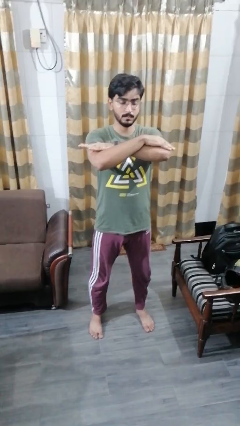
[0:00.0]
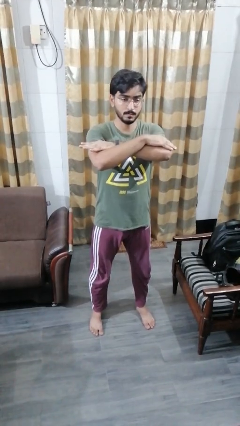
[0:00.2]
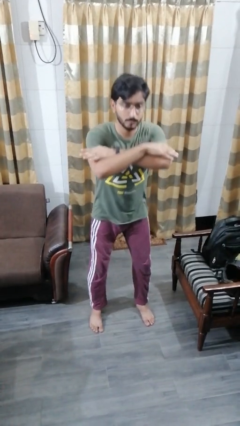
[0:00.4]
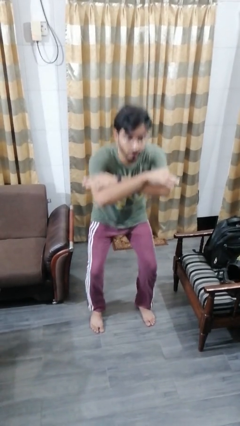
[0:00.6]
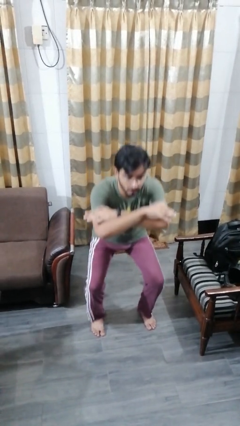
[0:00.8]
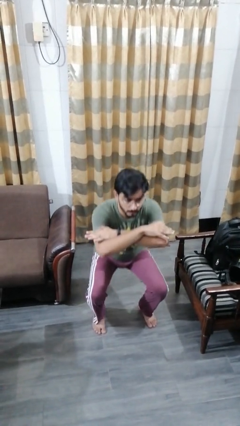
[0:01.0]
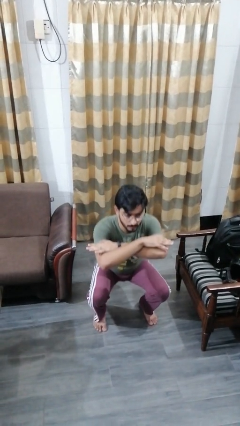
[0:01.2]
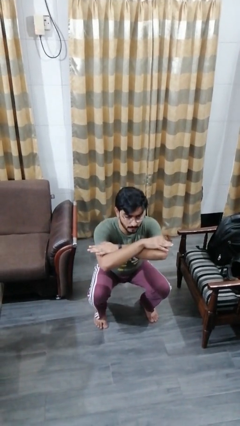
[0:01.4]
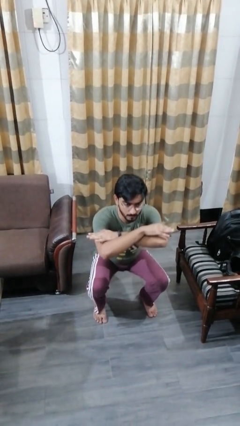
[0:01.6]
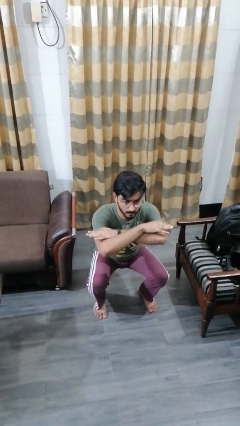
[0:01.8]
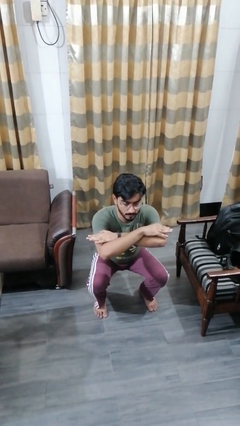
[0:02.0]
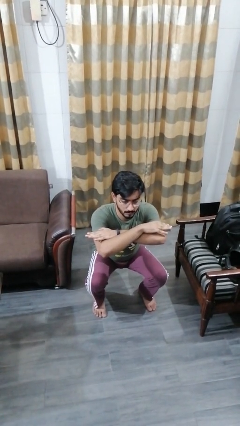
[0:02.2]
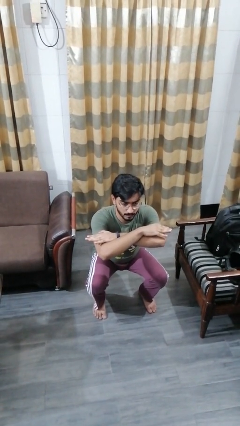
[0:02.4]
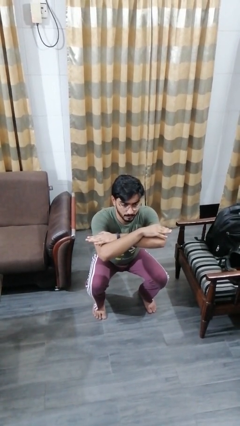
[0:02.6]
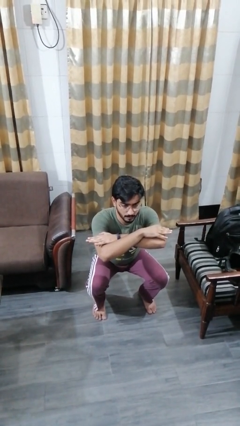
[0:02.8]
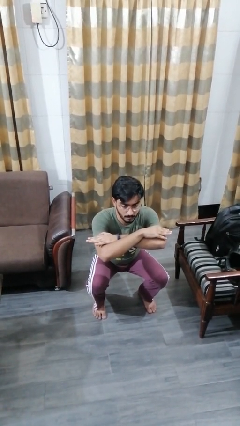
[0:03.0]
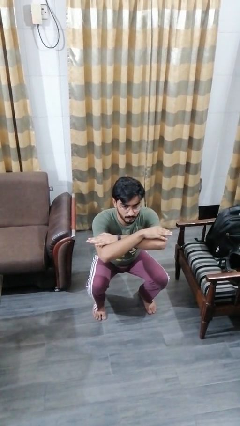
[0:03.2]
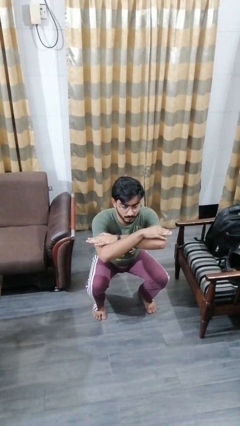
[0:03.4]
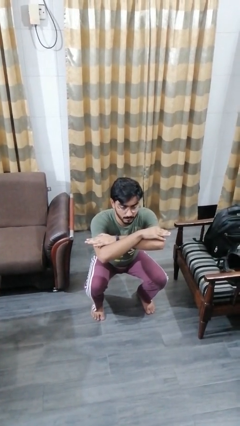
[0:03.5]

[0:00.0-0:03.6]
person sits crisscross

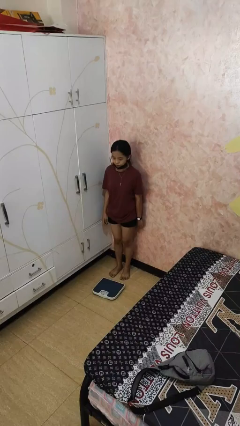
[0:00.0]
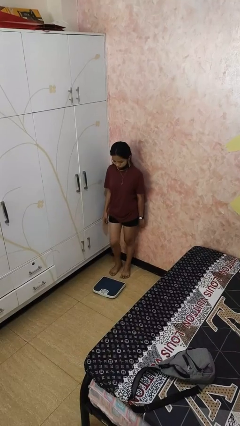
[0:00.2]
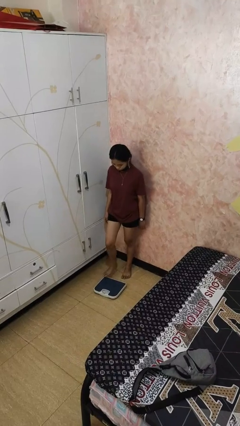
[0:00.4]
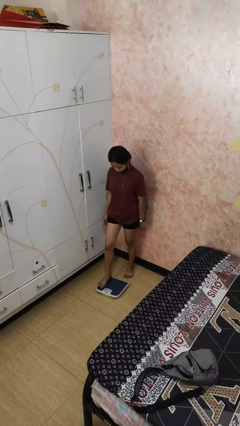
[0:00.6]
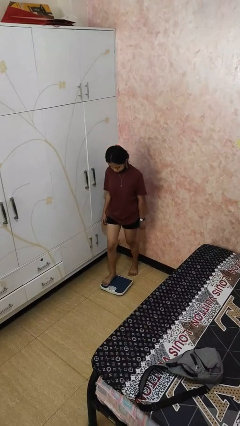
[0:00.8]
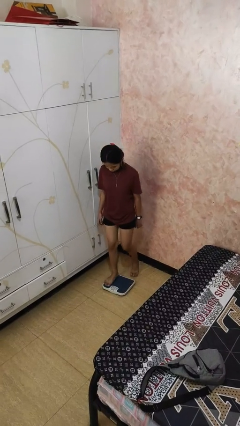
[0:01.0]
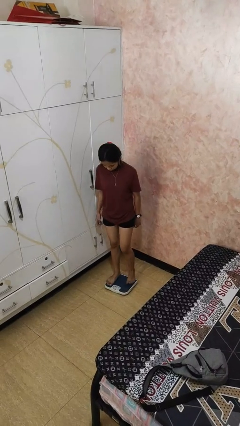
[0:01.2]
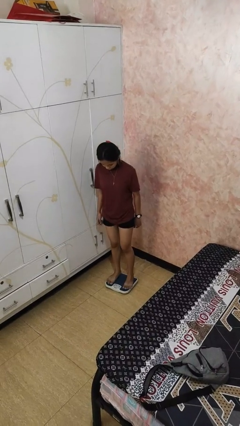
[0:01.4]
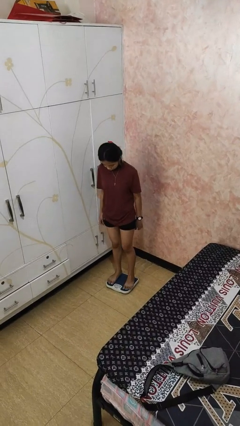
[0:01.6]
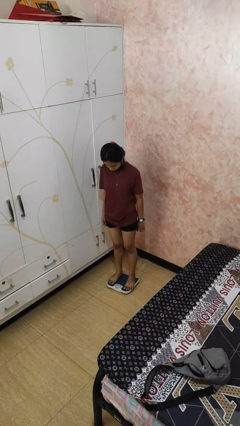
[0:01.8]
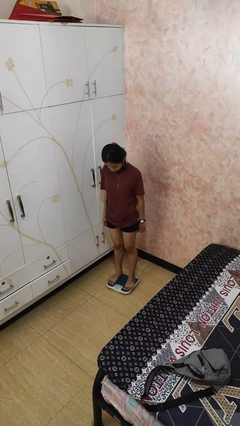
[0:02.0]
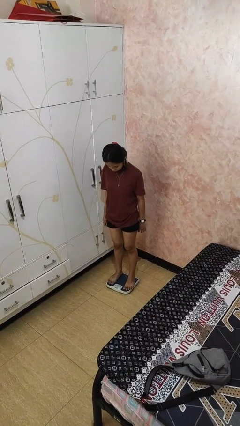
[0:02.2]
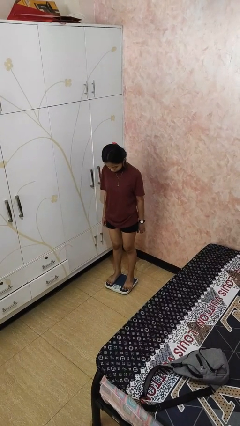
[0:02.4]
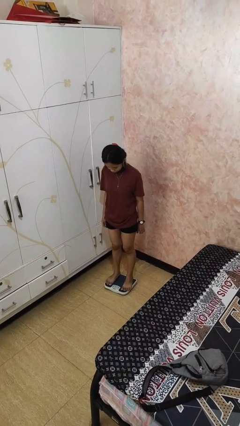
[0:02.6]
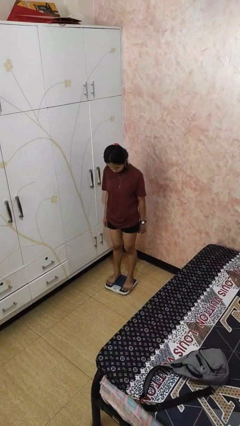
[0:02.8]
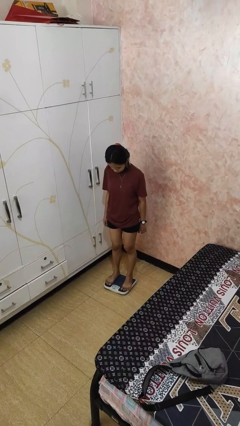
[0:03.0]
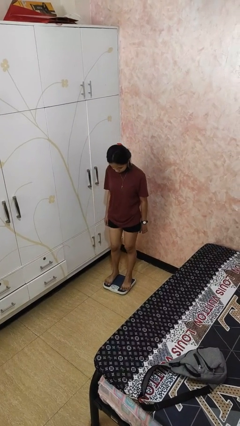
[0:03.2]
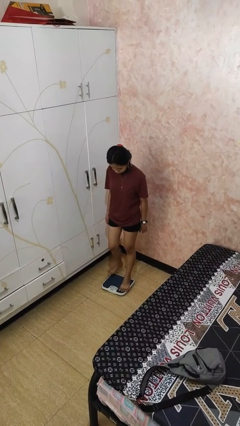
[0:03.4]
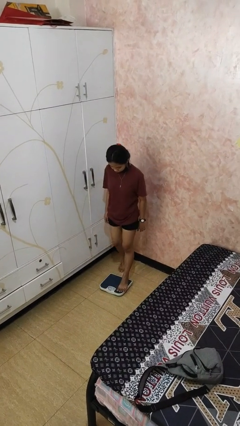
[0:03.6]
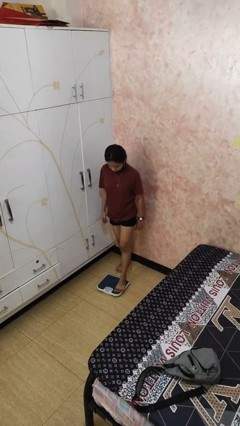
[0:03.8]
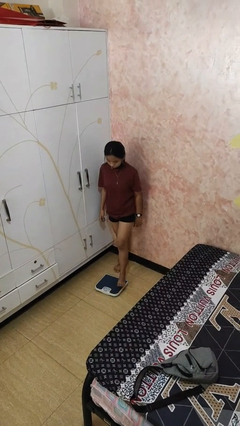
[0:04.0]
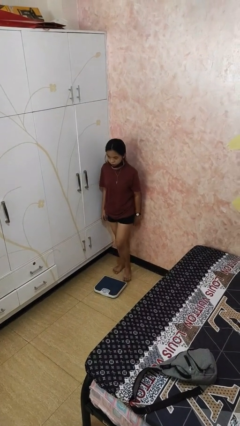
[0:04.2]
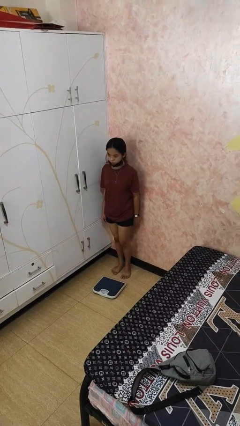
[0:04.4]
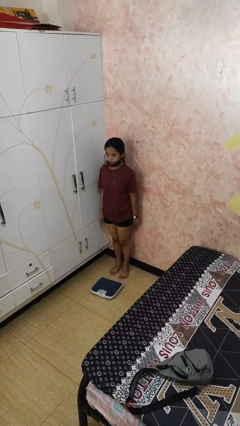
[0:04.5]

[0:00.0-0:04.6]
person uses bodyweight scale

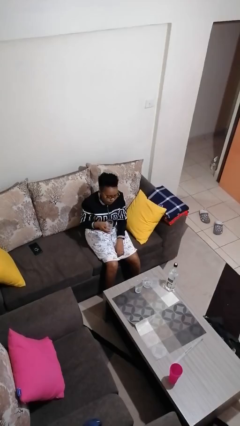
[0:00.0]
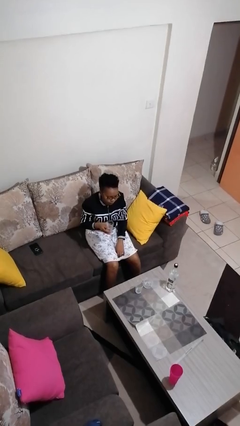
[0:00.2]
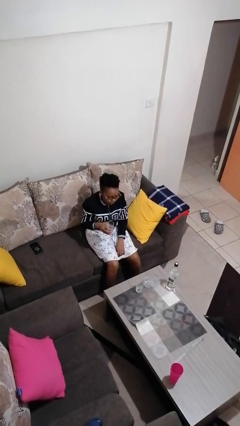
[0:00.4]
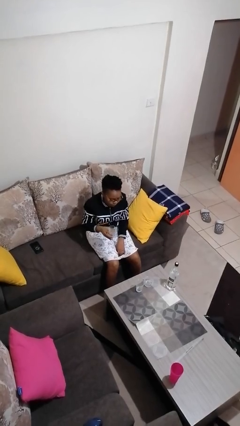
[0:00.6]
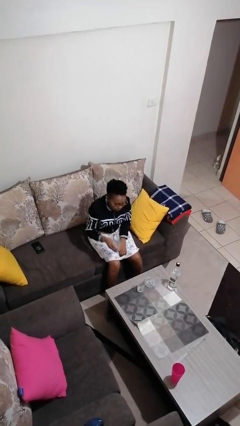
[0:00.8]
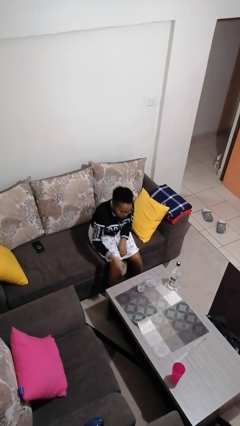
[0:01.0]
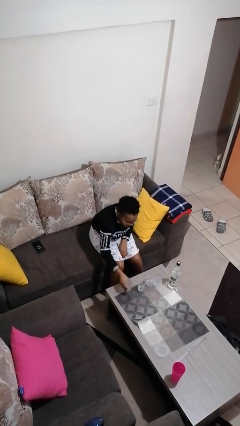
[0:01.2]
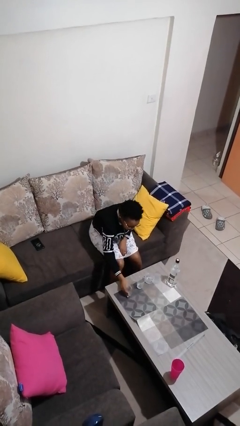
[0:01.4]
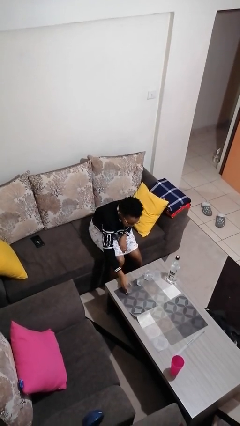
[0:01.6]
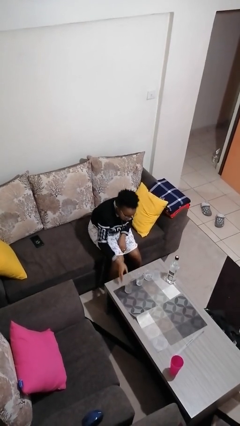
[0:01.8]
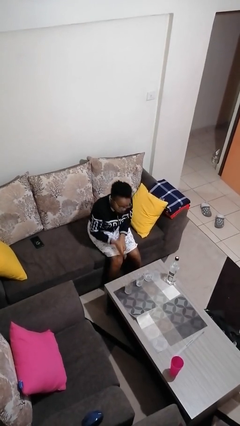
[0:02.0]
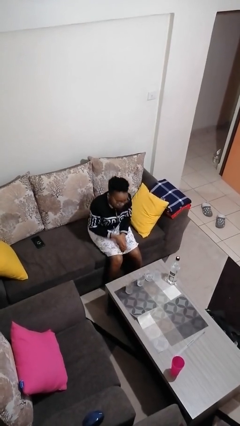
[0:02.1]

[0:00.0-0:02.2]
person puts down object on table

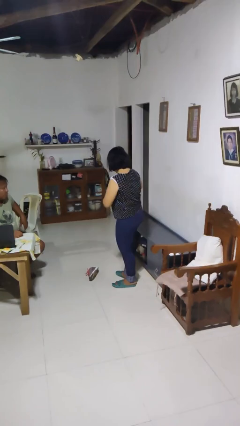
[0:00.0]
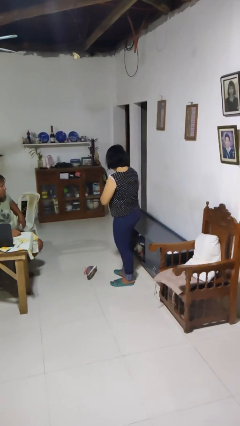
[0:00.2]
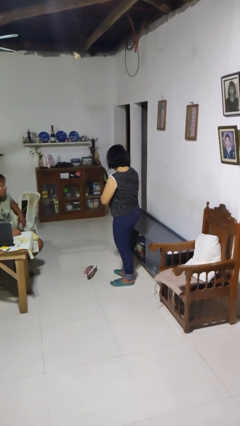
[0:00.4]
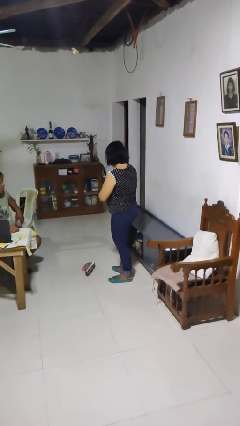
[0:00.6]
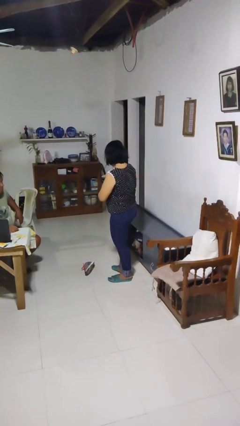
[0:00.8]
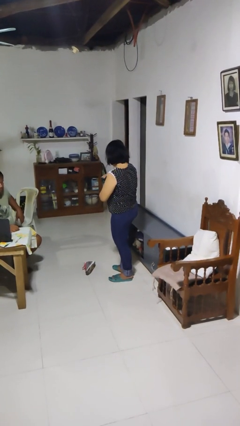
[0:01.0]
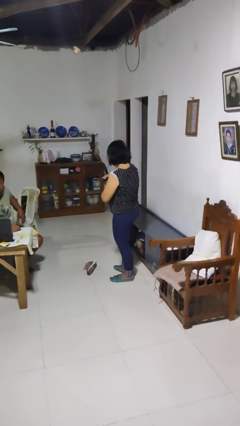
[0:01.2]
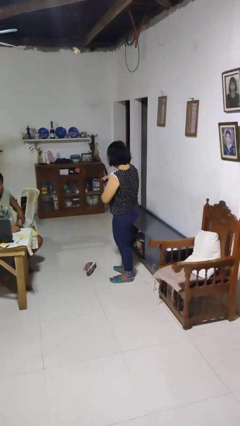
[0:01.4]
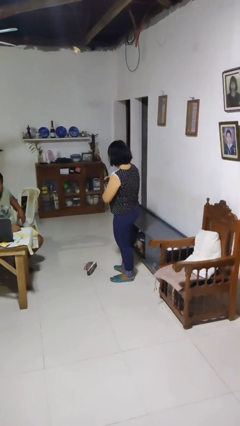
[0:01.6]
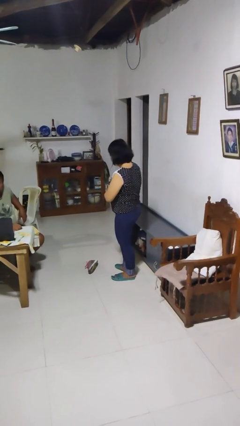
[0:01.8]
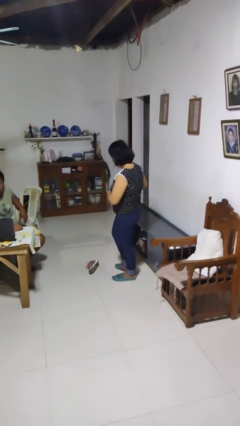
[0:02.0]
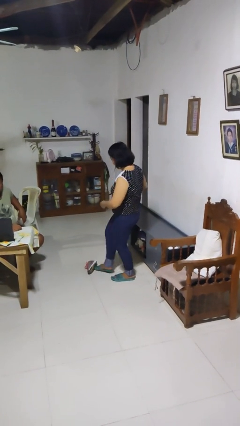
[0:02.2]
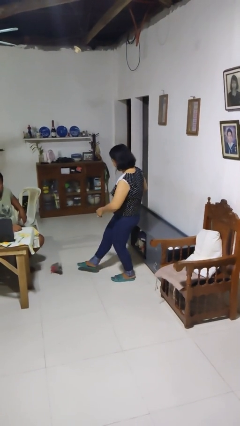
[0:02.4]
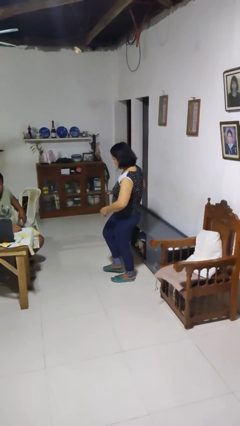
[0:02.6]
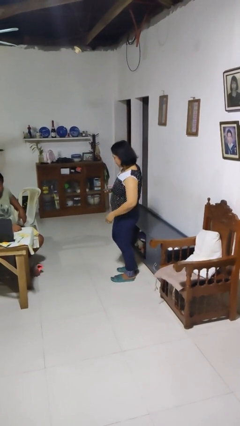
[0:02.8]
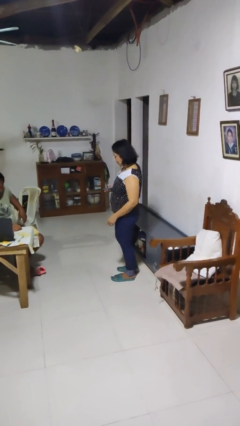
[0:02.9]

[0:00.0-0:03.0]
person kicks object to person

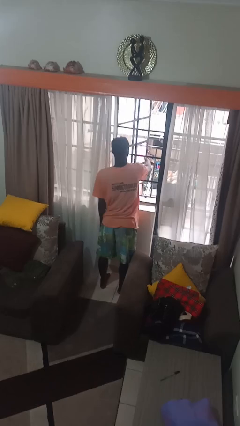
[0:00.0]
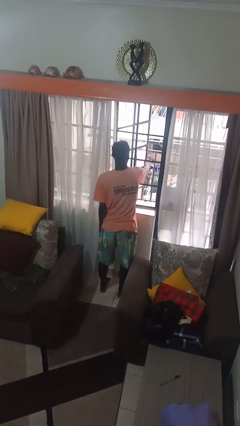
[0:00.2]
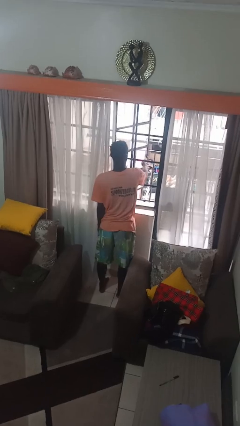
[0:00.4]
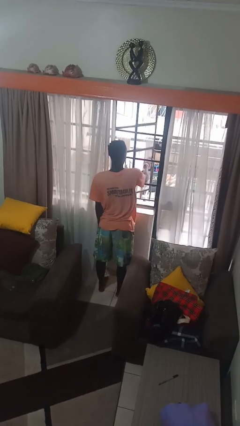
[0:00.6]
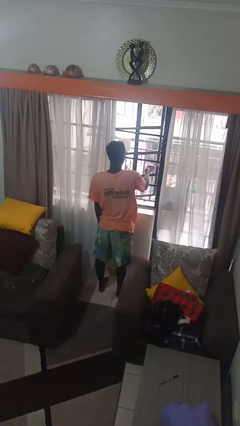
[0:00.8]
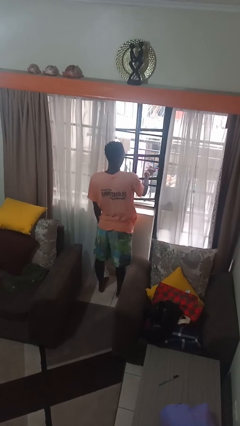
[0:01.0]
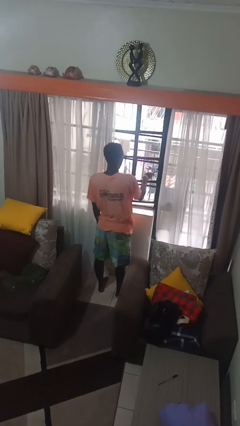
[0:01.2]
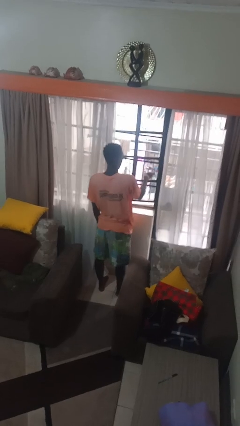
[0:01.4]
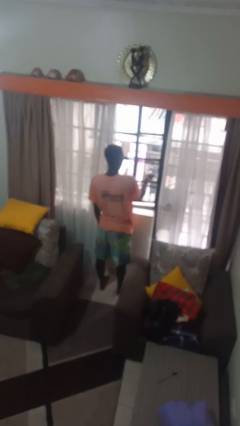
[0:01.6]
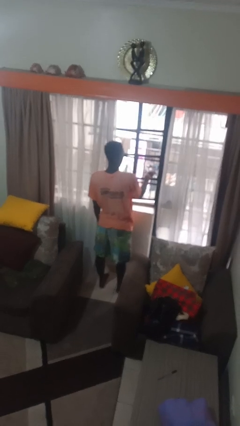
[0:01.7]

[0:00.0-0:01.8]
person closes home window

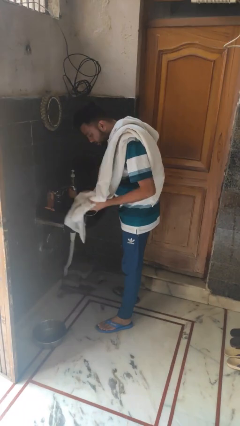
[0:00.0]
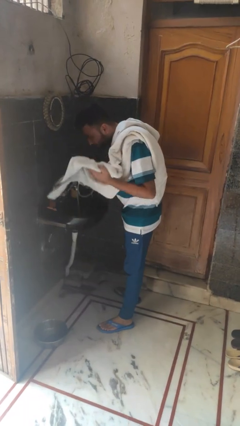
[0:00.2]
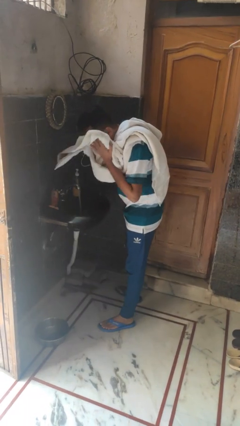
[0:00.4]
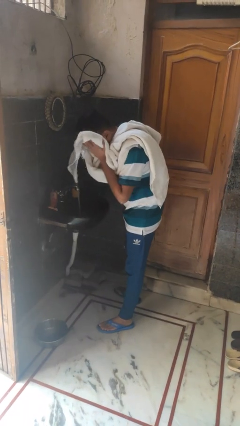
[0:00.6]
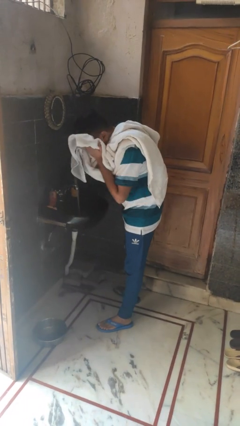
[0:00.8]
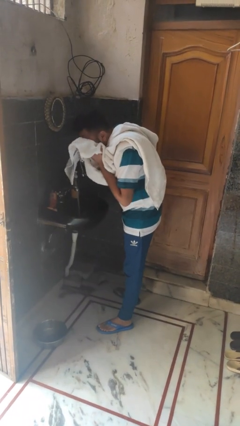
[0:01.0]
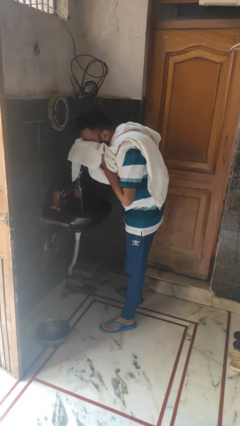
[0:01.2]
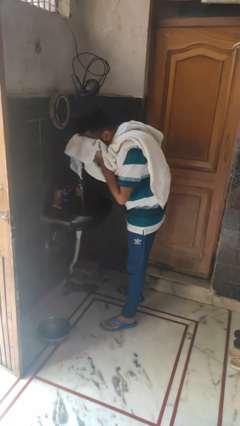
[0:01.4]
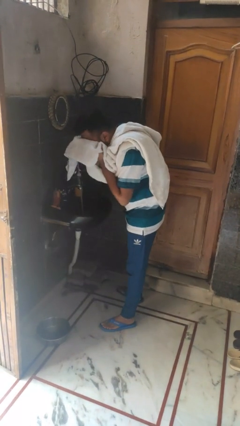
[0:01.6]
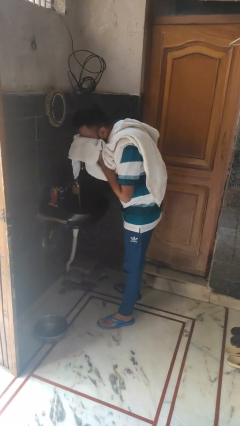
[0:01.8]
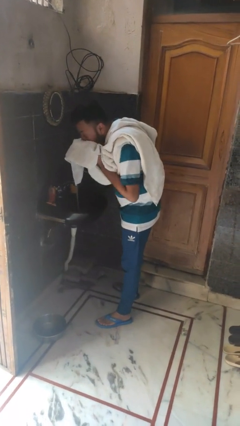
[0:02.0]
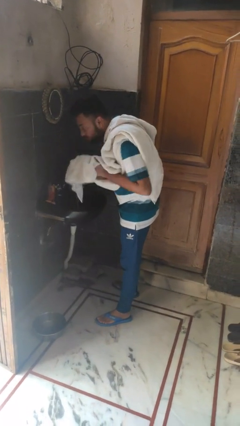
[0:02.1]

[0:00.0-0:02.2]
person dries face with towel
